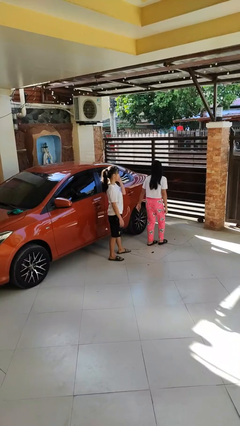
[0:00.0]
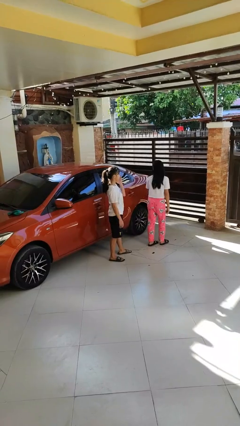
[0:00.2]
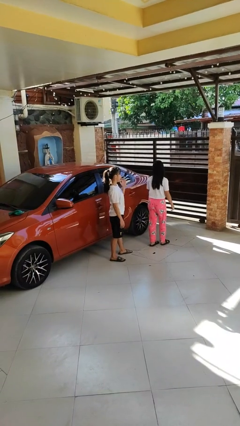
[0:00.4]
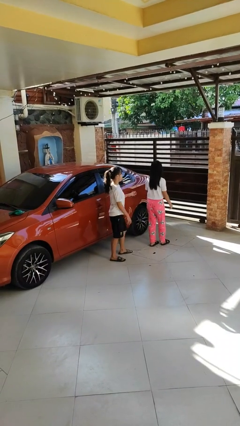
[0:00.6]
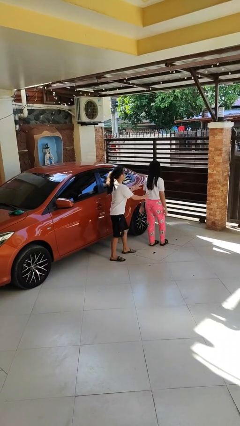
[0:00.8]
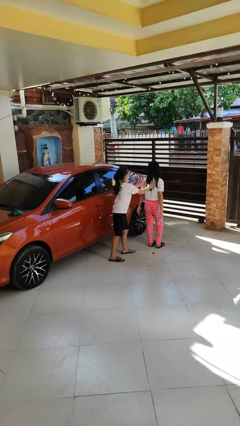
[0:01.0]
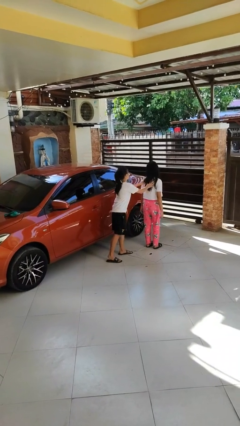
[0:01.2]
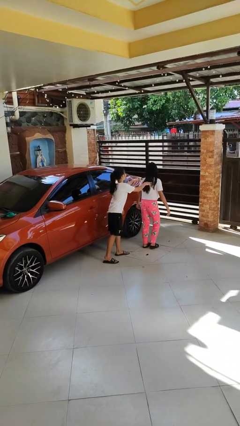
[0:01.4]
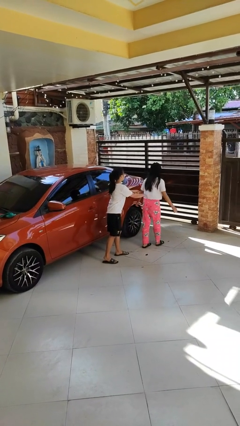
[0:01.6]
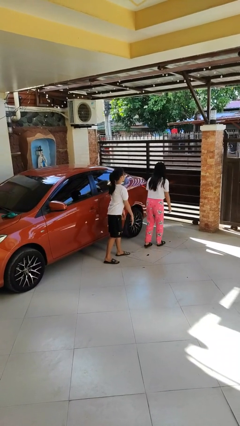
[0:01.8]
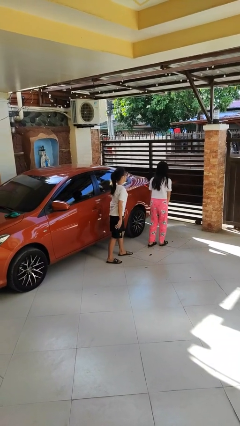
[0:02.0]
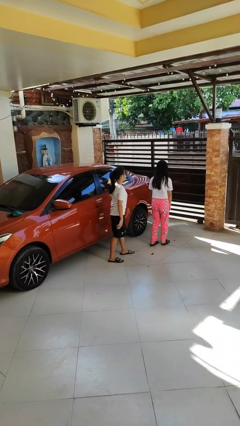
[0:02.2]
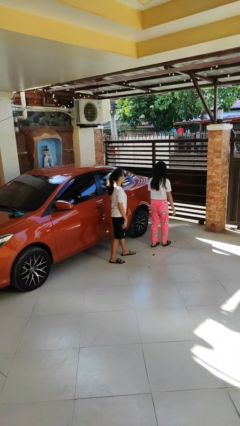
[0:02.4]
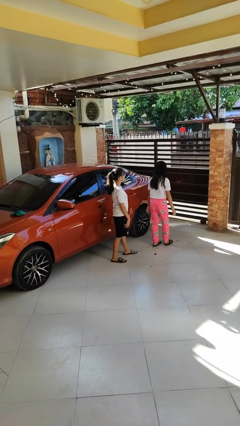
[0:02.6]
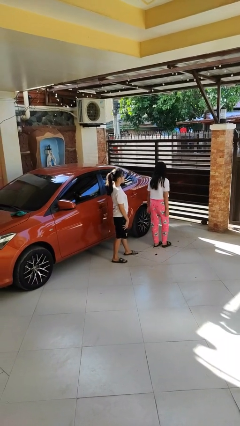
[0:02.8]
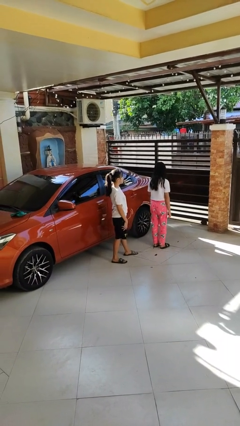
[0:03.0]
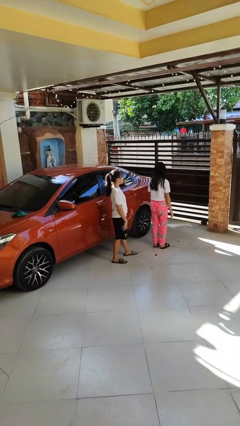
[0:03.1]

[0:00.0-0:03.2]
person shoves person

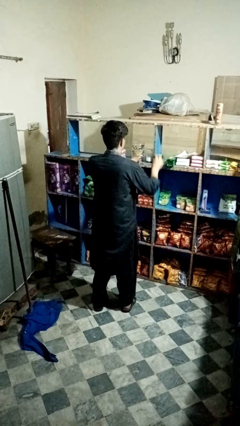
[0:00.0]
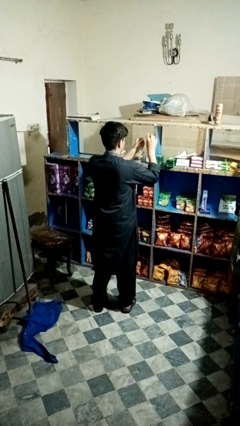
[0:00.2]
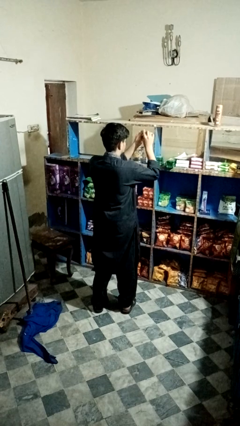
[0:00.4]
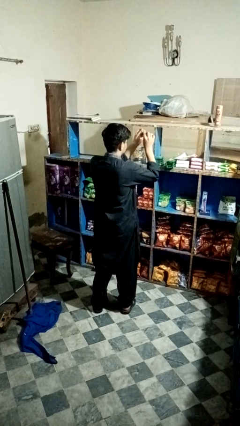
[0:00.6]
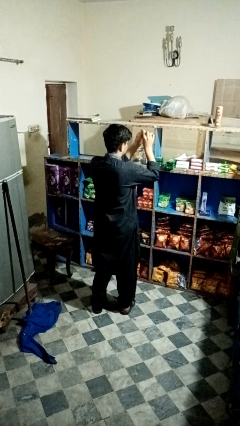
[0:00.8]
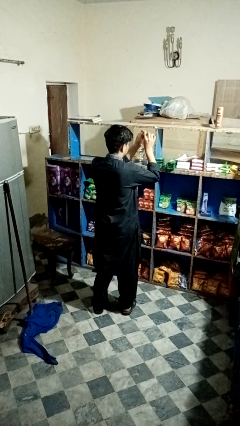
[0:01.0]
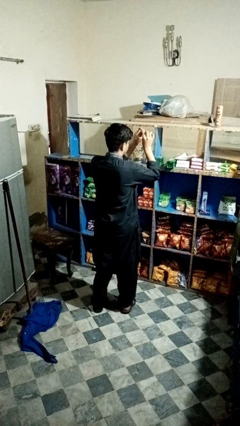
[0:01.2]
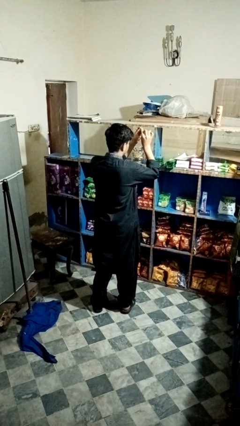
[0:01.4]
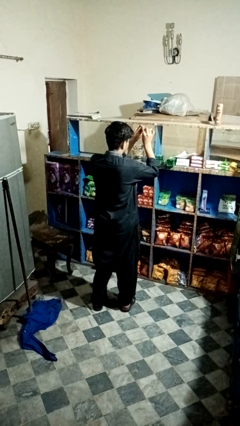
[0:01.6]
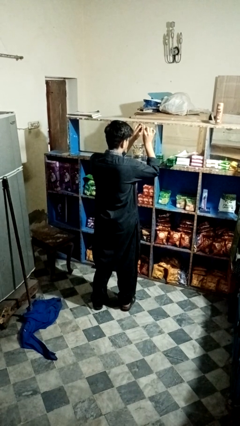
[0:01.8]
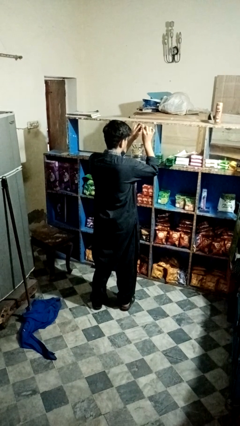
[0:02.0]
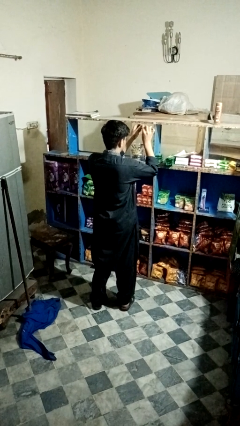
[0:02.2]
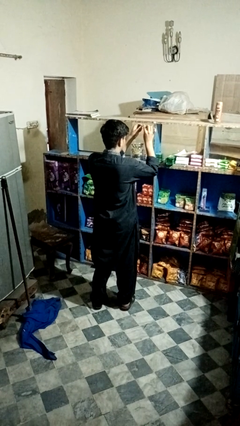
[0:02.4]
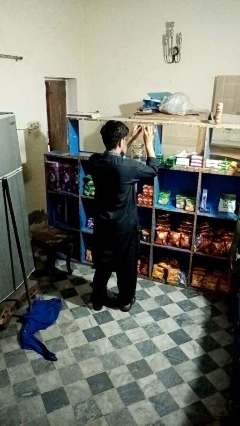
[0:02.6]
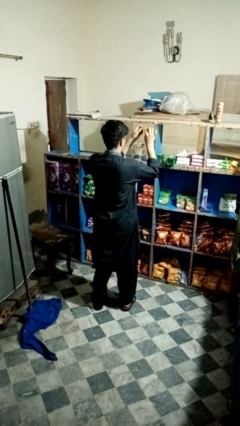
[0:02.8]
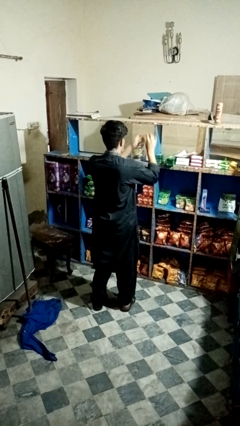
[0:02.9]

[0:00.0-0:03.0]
person files fingernails

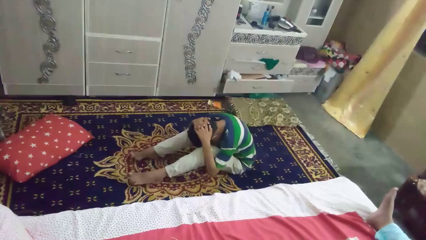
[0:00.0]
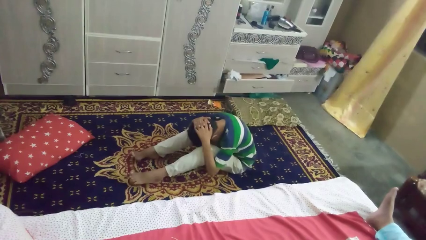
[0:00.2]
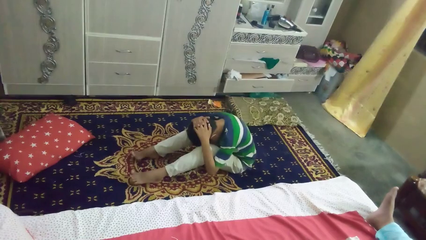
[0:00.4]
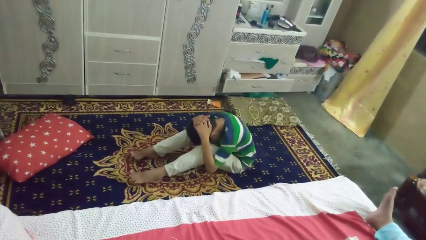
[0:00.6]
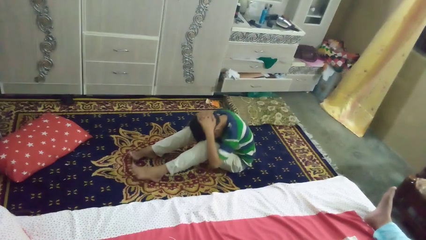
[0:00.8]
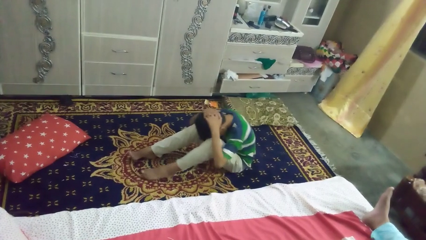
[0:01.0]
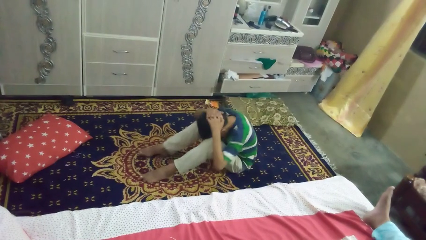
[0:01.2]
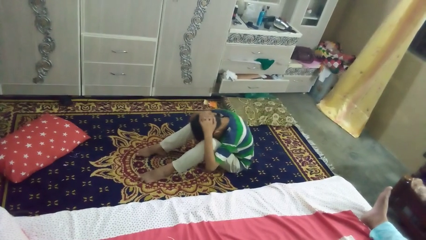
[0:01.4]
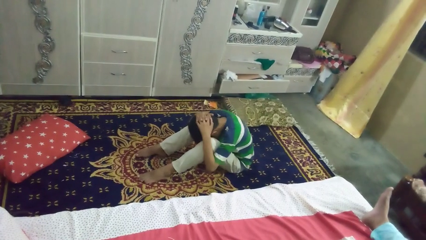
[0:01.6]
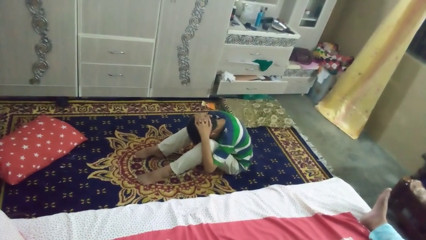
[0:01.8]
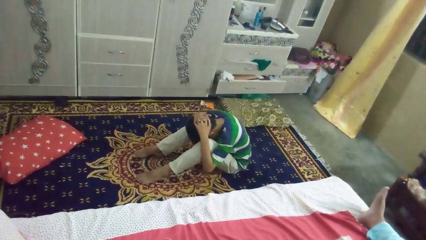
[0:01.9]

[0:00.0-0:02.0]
person exercises with situp

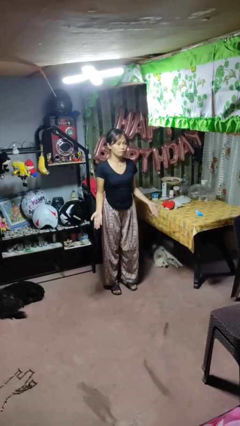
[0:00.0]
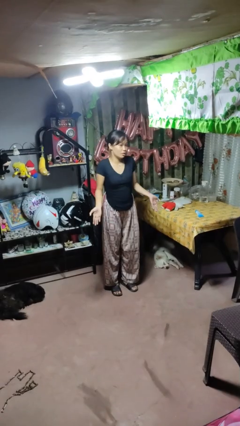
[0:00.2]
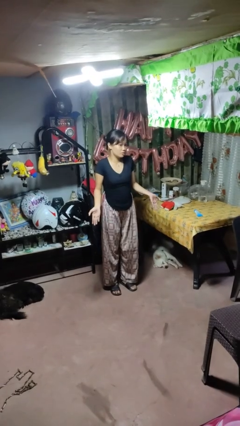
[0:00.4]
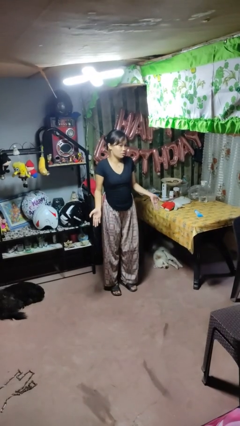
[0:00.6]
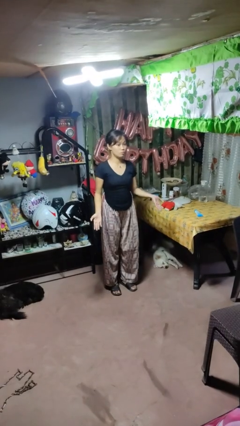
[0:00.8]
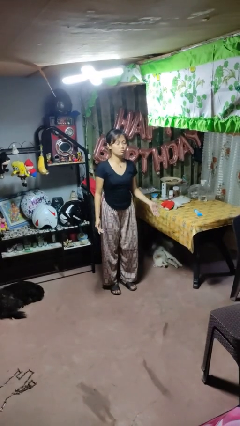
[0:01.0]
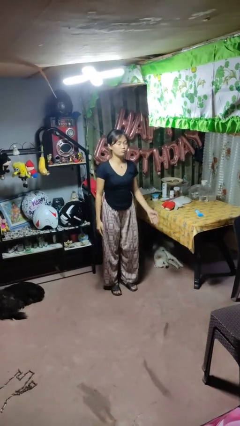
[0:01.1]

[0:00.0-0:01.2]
person shrugs

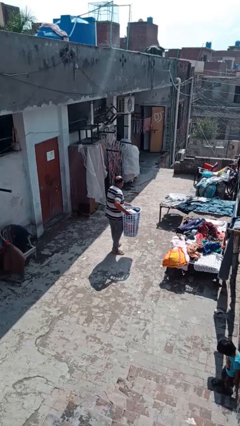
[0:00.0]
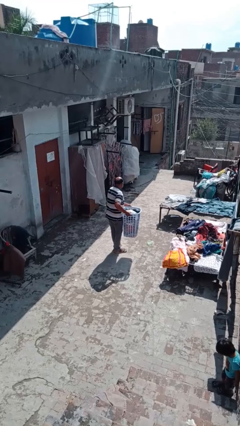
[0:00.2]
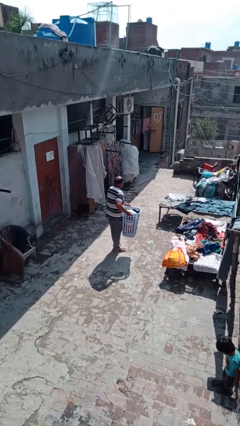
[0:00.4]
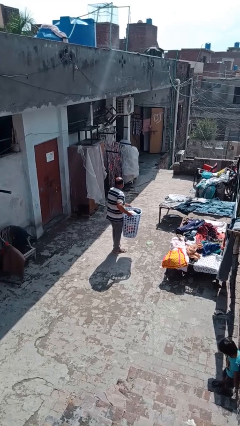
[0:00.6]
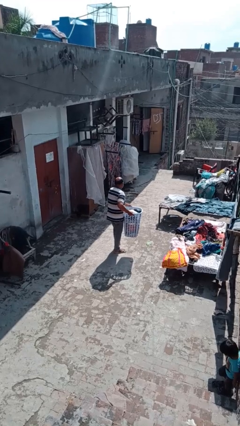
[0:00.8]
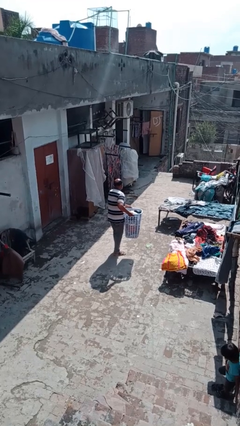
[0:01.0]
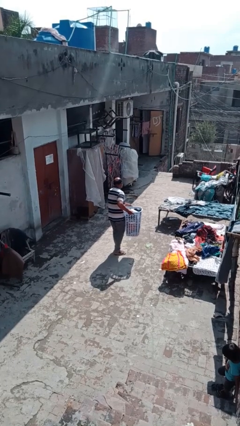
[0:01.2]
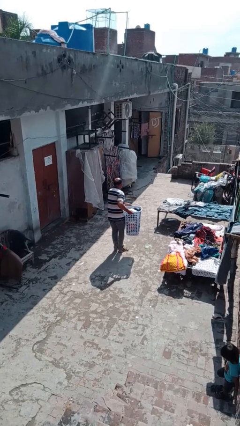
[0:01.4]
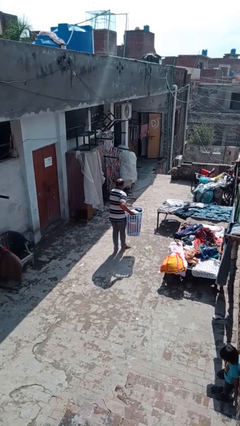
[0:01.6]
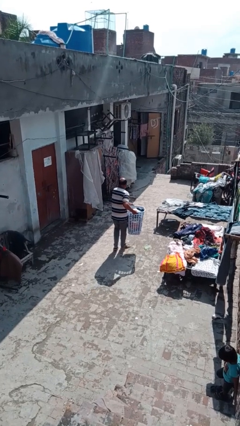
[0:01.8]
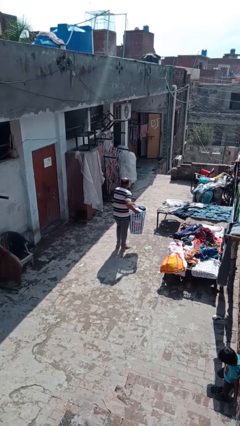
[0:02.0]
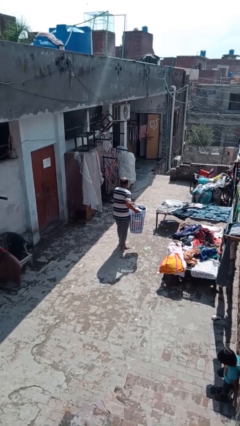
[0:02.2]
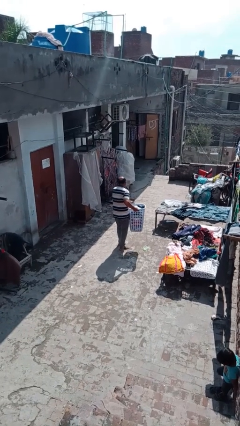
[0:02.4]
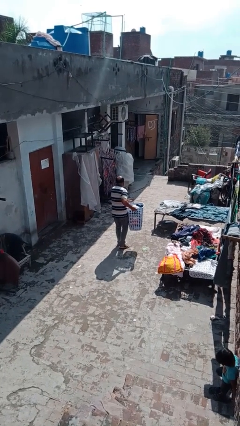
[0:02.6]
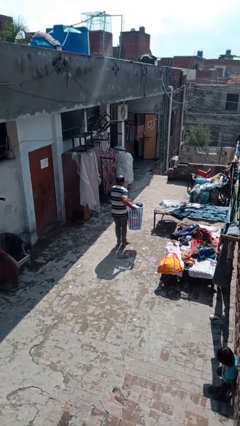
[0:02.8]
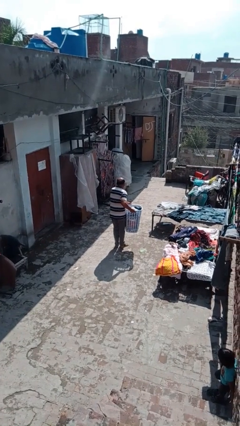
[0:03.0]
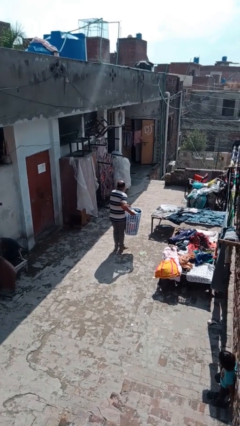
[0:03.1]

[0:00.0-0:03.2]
person carries laundry basket

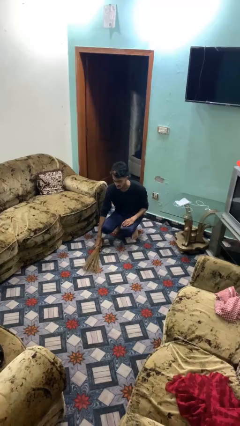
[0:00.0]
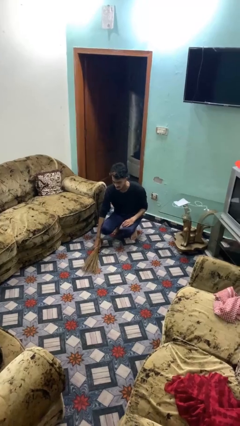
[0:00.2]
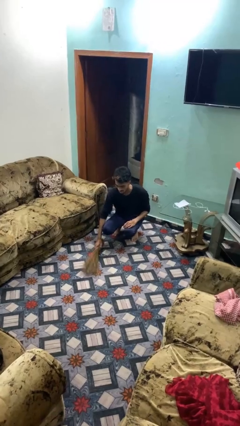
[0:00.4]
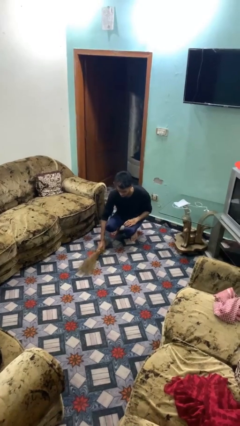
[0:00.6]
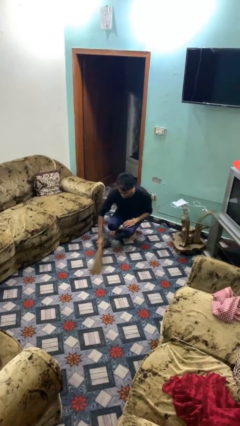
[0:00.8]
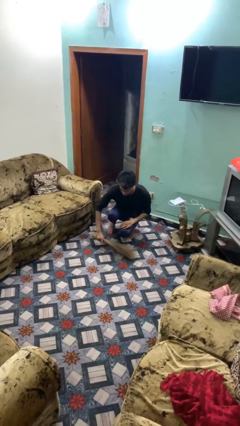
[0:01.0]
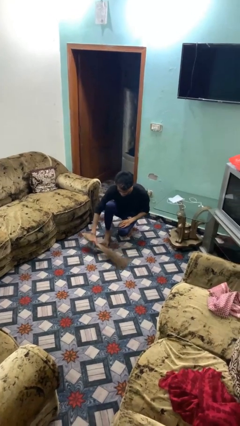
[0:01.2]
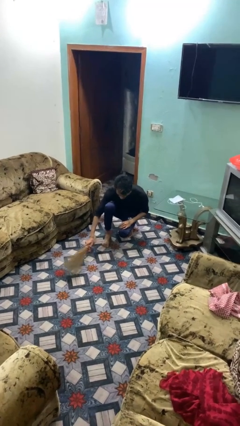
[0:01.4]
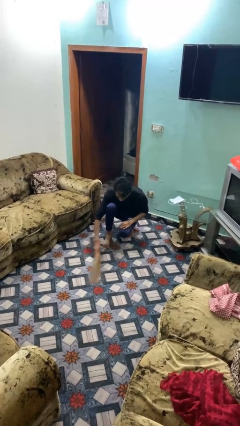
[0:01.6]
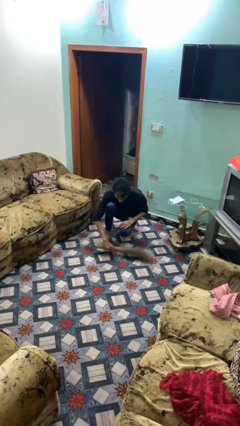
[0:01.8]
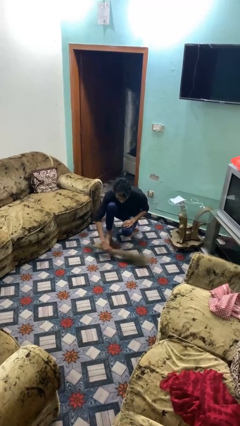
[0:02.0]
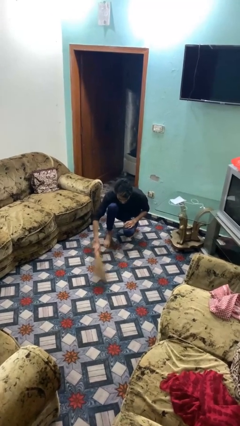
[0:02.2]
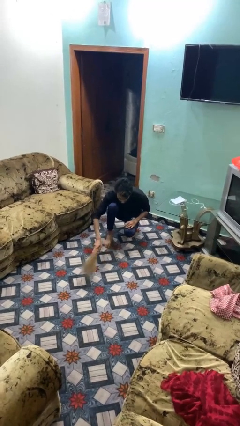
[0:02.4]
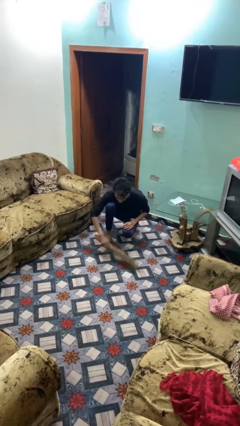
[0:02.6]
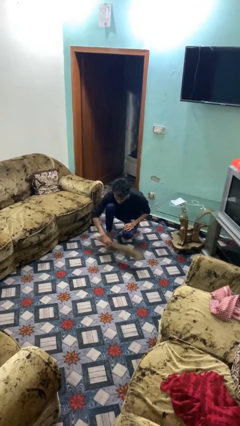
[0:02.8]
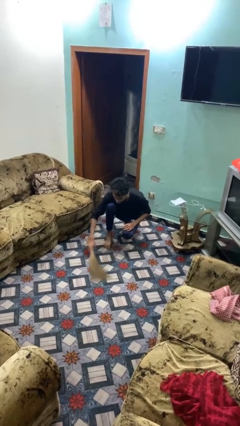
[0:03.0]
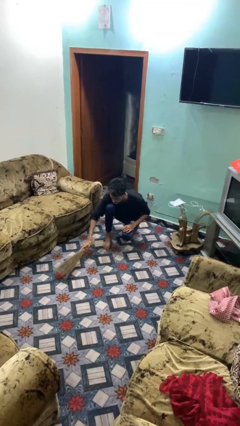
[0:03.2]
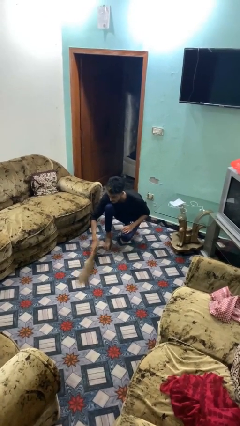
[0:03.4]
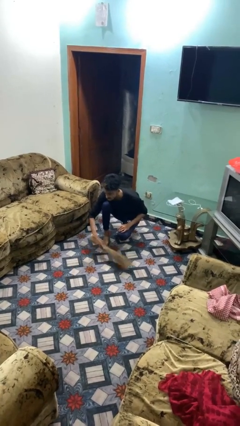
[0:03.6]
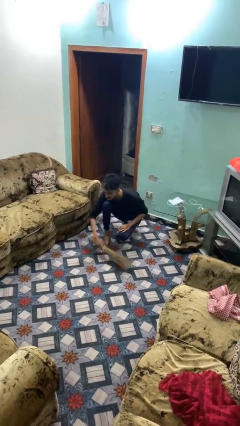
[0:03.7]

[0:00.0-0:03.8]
person sweeps floor

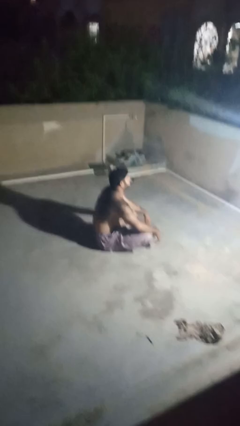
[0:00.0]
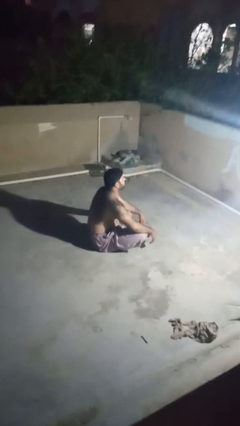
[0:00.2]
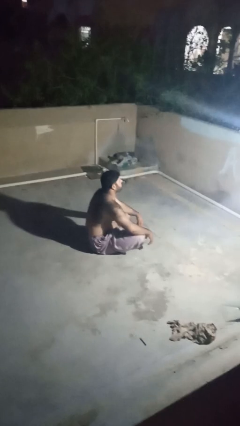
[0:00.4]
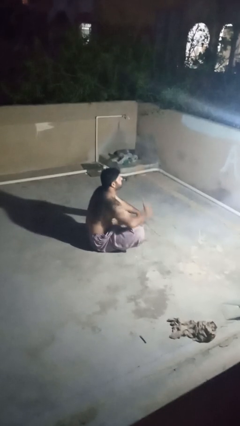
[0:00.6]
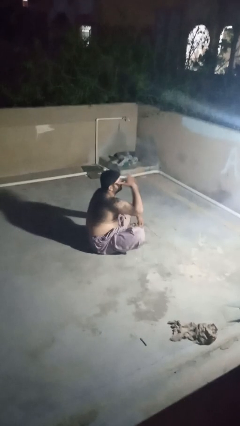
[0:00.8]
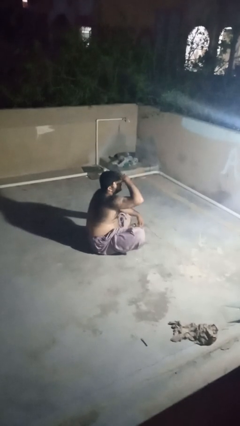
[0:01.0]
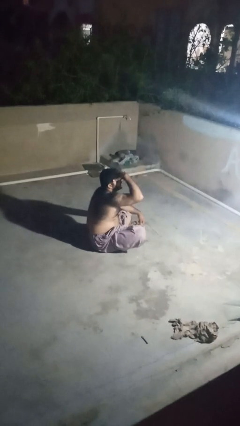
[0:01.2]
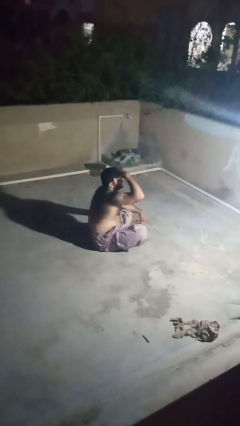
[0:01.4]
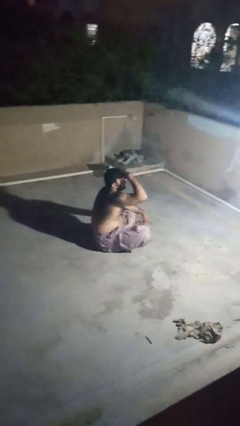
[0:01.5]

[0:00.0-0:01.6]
person shades eyes
